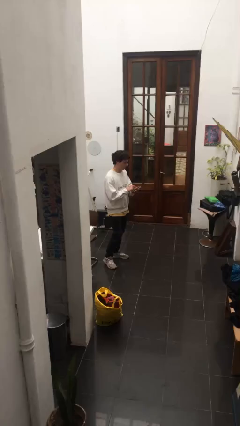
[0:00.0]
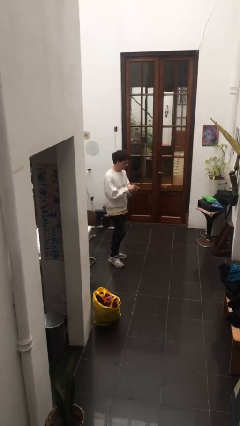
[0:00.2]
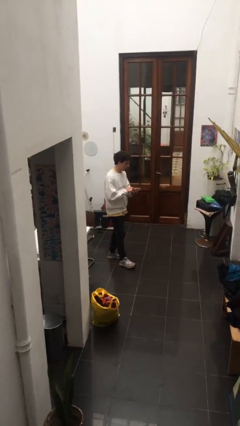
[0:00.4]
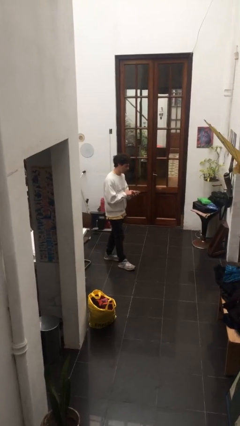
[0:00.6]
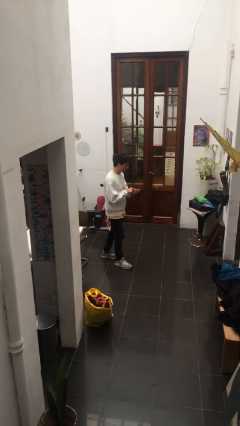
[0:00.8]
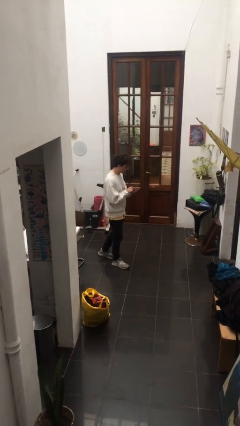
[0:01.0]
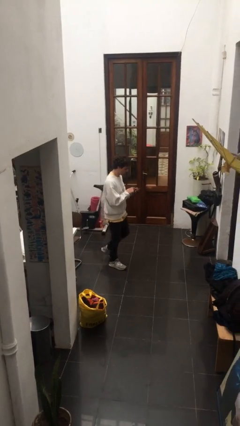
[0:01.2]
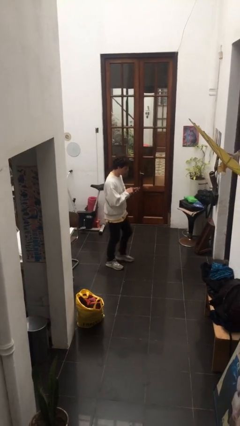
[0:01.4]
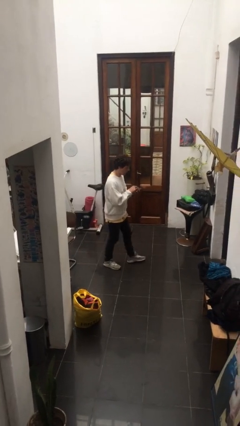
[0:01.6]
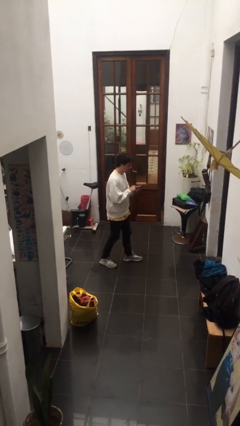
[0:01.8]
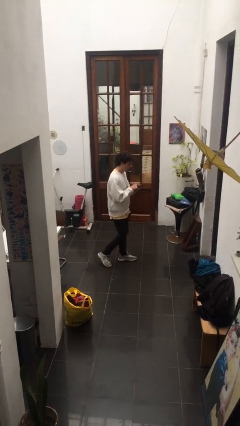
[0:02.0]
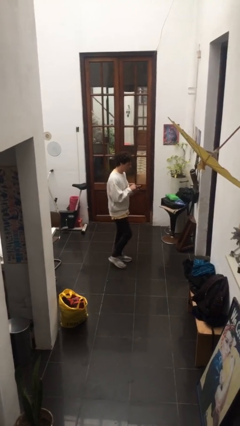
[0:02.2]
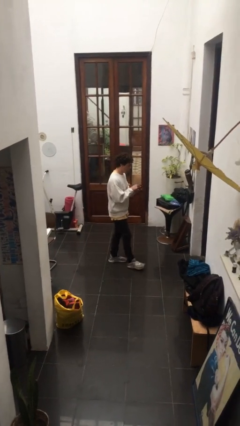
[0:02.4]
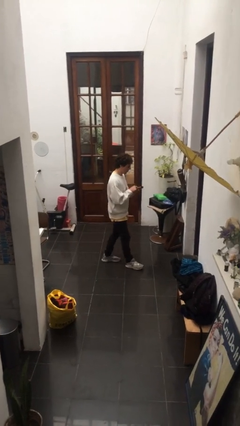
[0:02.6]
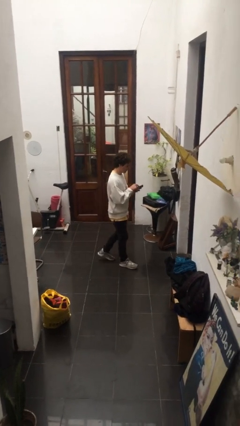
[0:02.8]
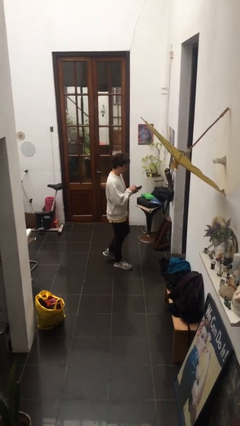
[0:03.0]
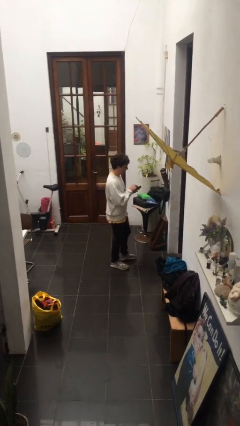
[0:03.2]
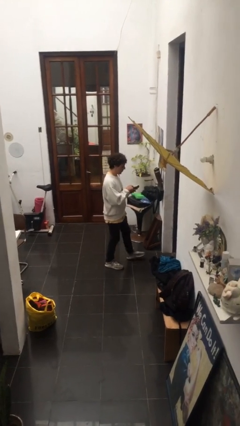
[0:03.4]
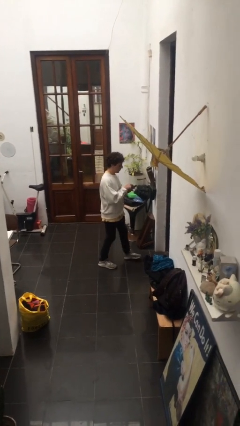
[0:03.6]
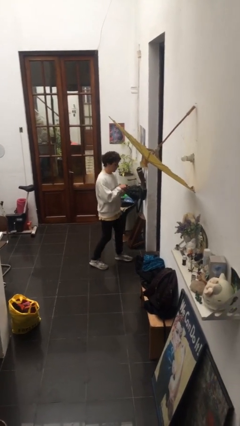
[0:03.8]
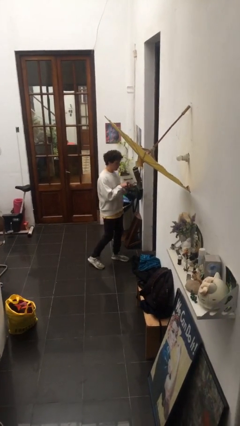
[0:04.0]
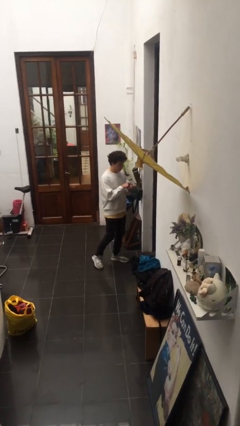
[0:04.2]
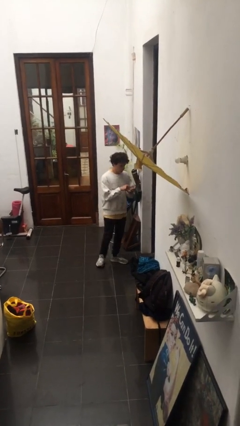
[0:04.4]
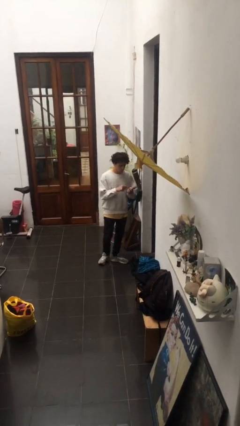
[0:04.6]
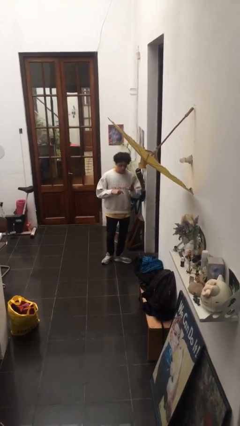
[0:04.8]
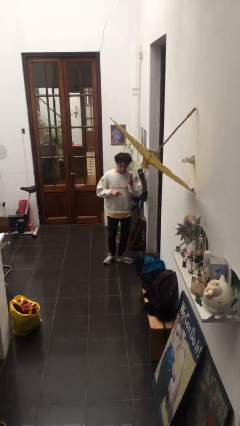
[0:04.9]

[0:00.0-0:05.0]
person texts on phone

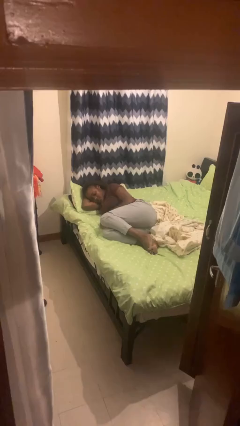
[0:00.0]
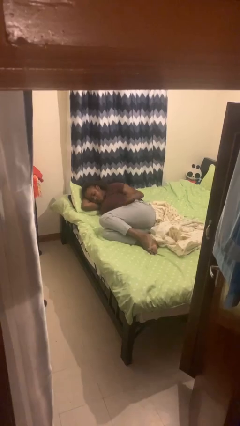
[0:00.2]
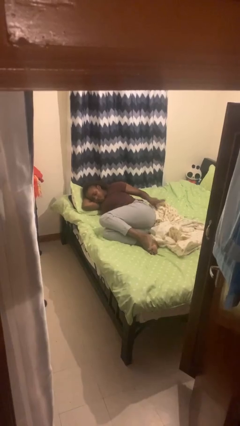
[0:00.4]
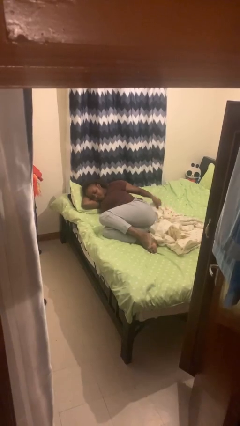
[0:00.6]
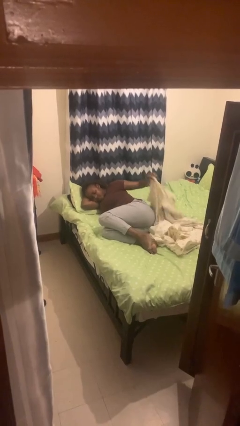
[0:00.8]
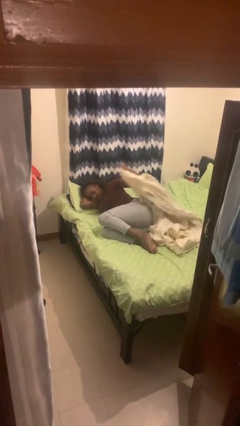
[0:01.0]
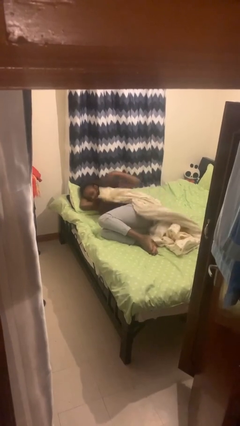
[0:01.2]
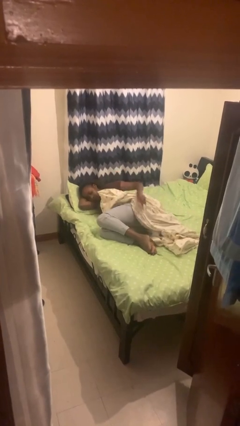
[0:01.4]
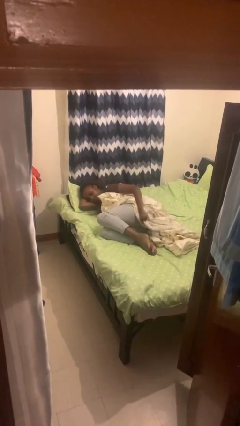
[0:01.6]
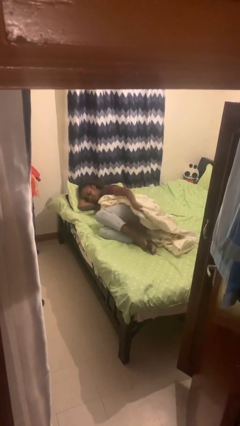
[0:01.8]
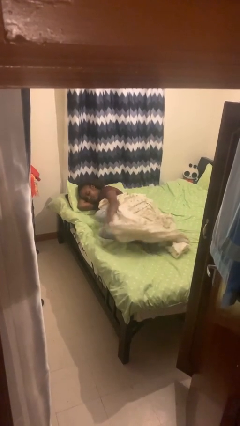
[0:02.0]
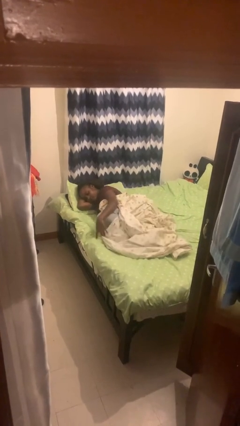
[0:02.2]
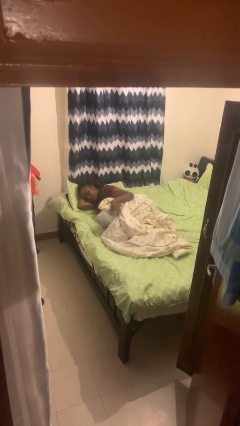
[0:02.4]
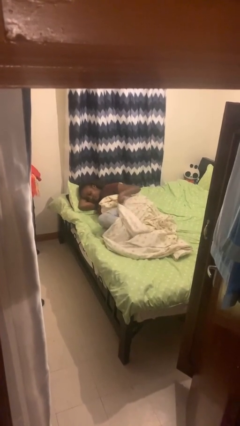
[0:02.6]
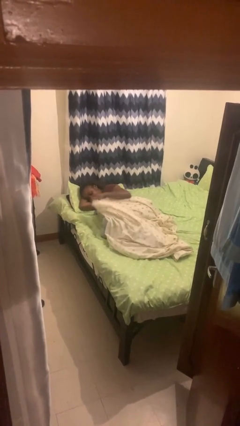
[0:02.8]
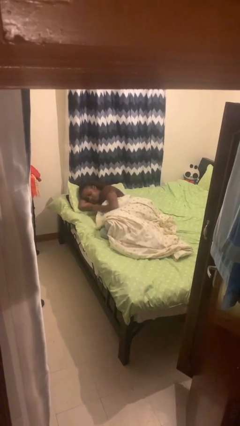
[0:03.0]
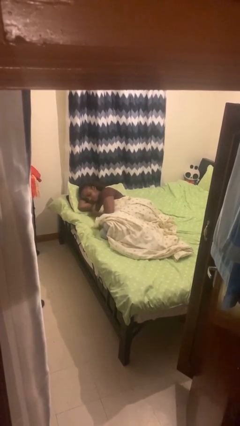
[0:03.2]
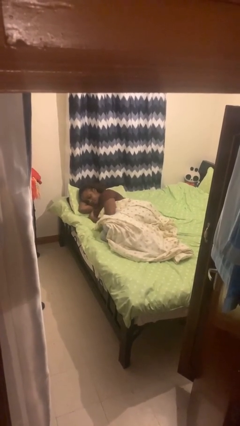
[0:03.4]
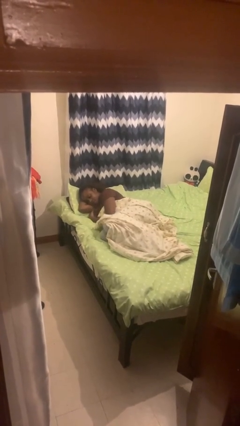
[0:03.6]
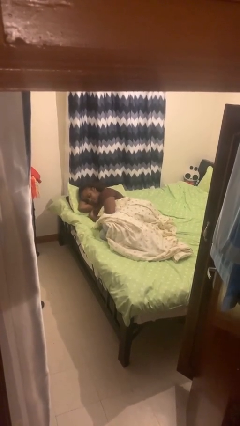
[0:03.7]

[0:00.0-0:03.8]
person covers with bedsheets

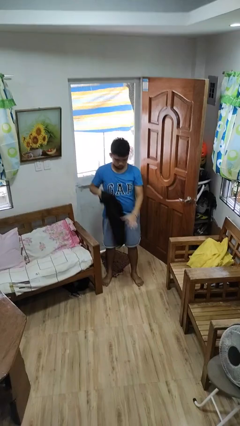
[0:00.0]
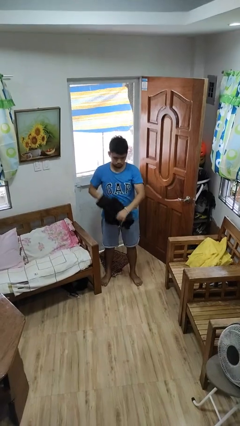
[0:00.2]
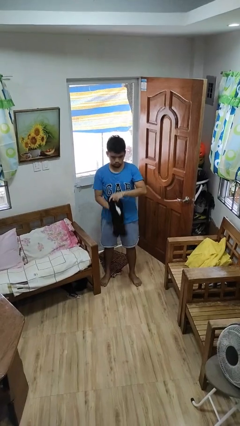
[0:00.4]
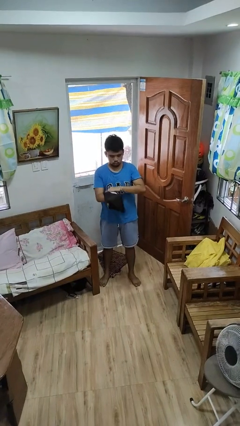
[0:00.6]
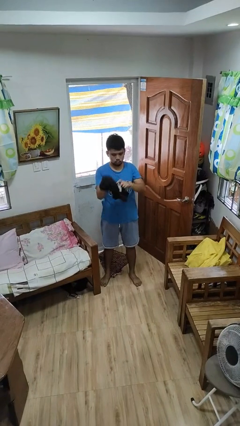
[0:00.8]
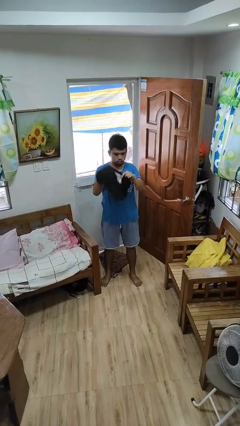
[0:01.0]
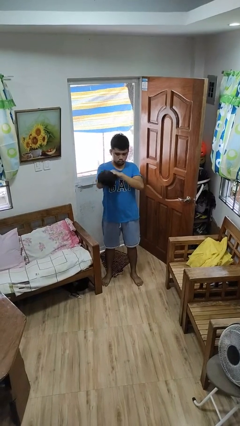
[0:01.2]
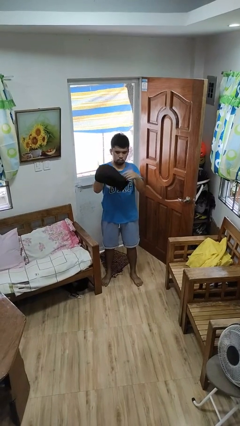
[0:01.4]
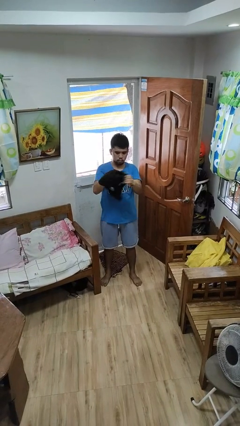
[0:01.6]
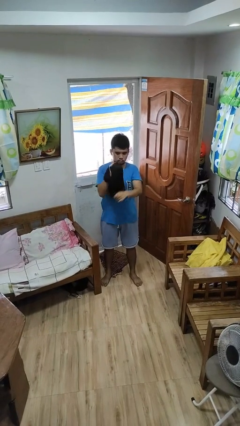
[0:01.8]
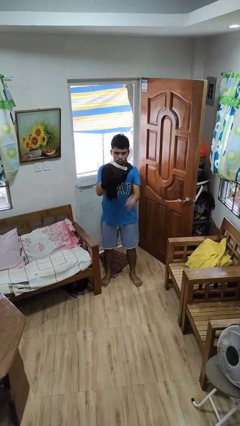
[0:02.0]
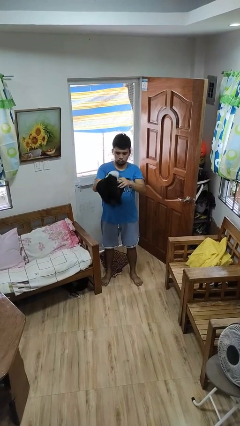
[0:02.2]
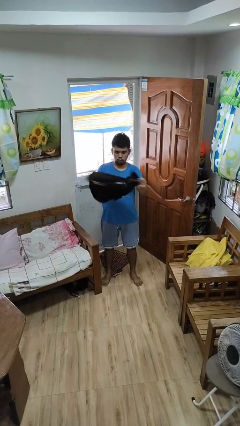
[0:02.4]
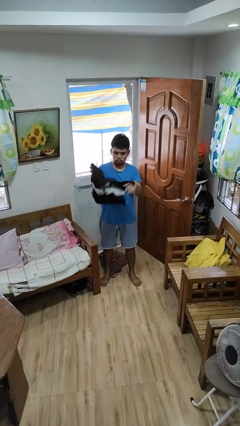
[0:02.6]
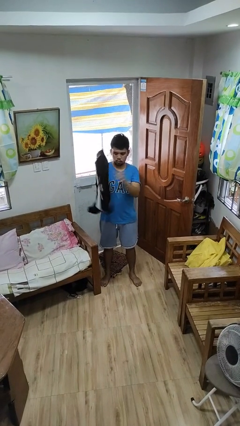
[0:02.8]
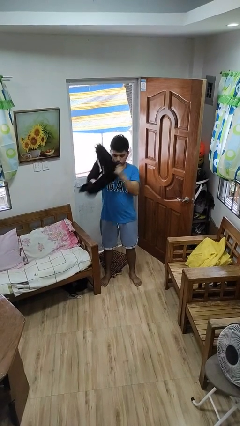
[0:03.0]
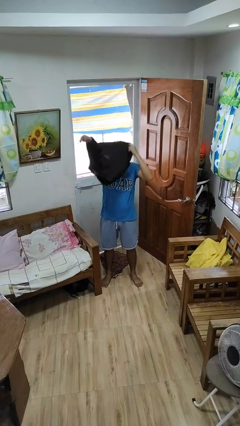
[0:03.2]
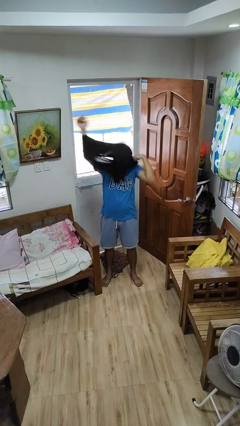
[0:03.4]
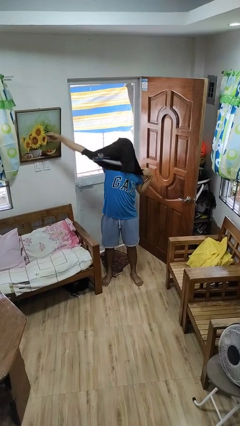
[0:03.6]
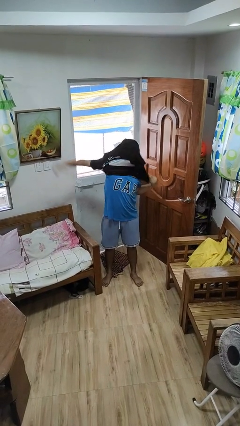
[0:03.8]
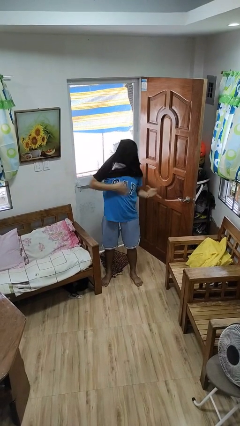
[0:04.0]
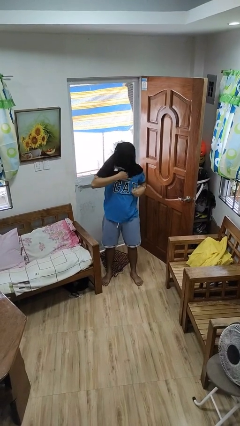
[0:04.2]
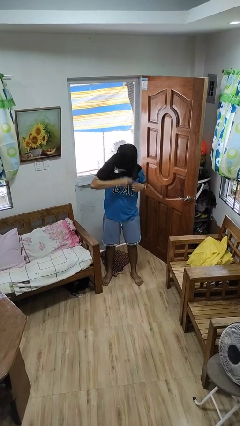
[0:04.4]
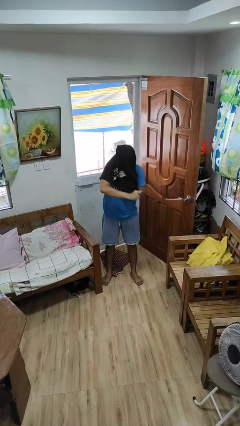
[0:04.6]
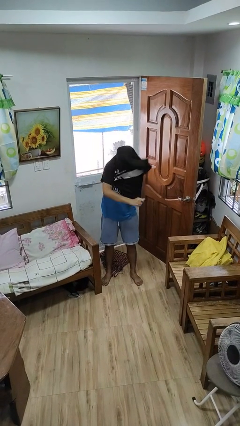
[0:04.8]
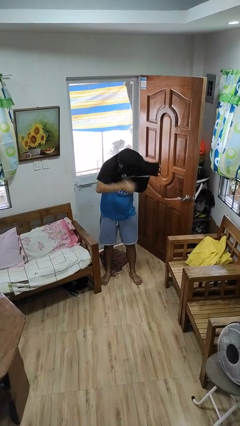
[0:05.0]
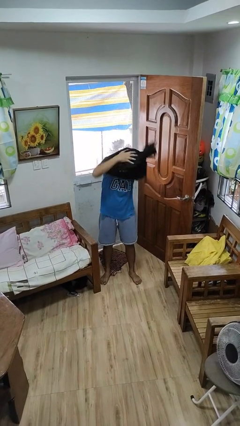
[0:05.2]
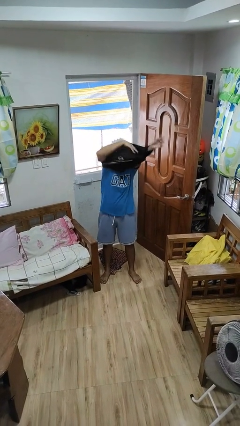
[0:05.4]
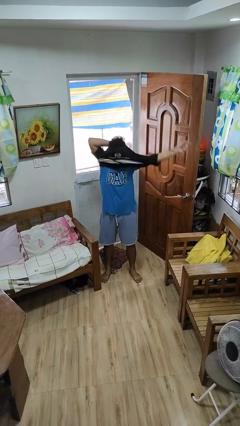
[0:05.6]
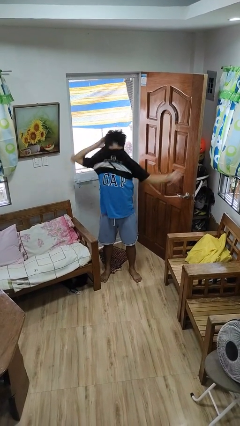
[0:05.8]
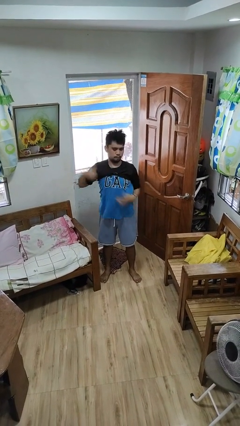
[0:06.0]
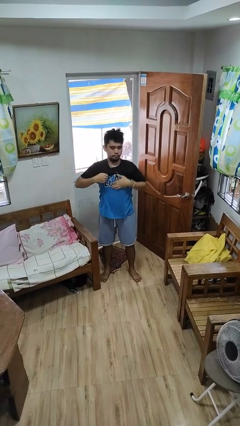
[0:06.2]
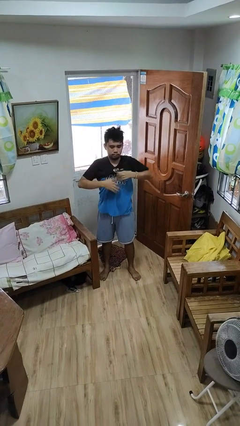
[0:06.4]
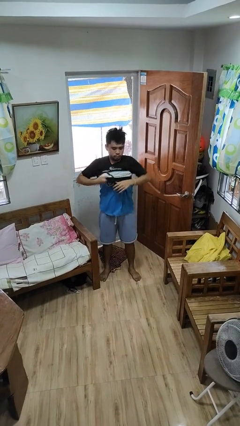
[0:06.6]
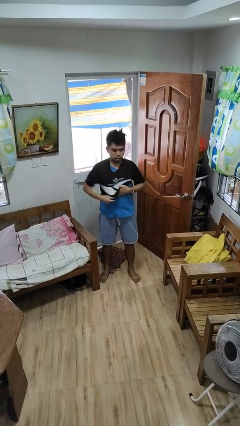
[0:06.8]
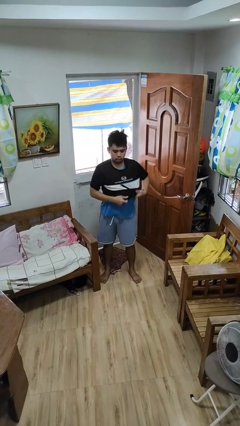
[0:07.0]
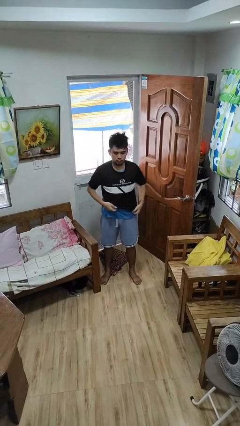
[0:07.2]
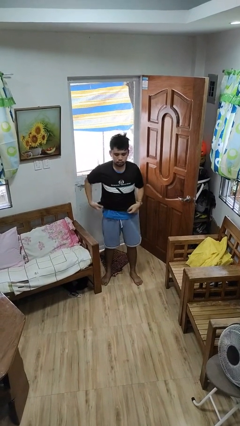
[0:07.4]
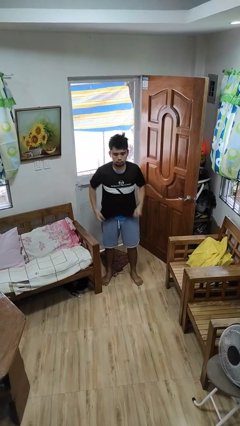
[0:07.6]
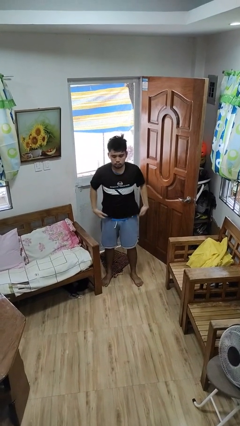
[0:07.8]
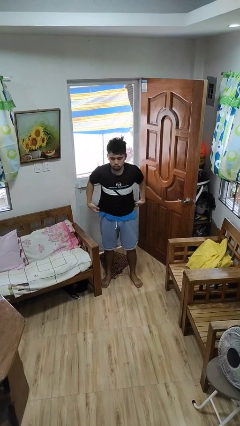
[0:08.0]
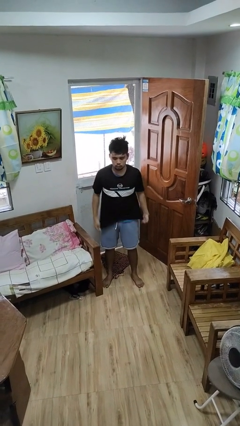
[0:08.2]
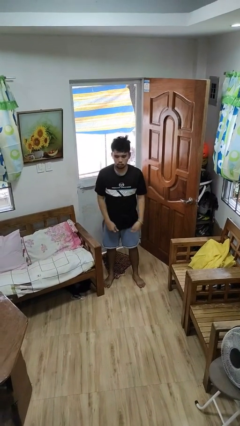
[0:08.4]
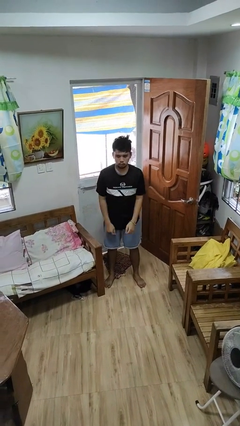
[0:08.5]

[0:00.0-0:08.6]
person puts on shirt

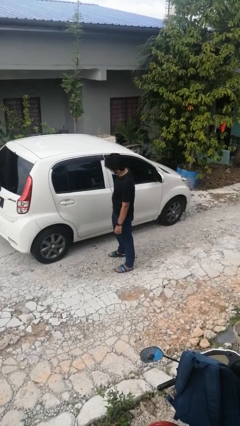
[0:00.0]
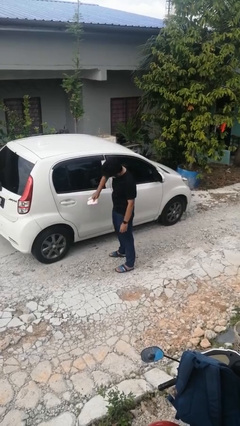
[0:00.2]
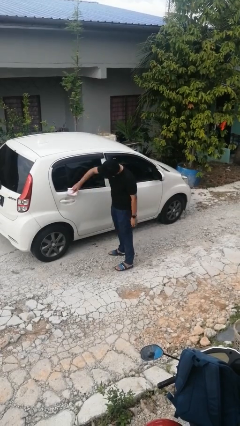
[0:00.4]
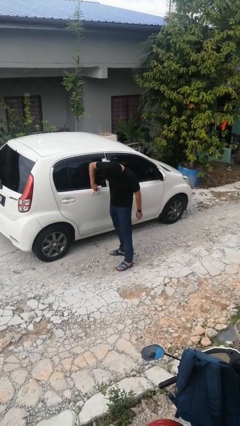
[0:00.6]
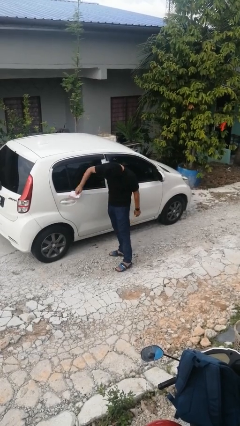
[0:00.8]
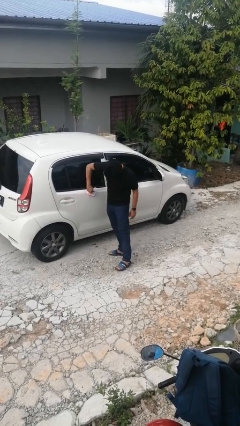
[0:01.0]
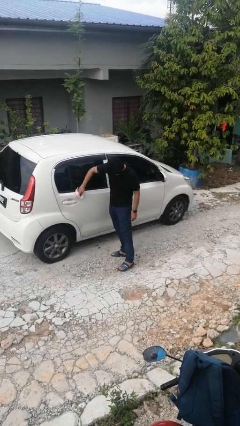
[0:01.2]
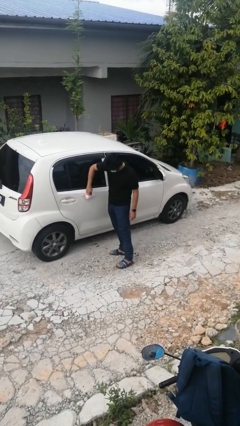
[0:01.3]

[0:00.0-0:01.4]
person polishes car with rag
